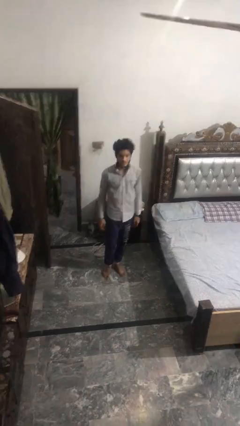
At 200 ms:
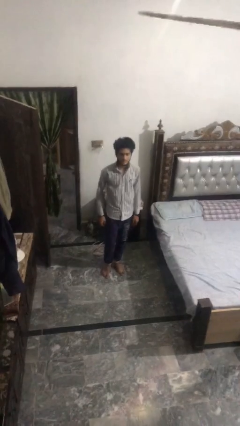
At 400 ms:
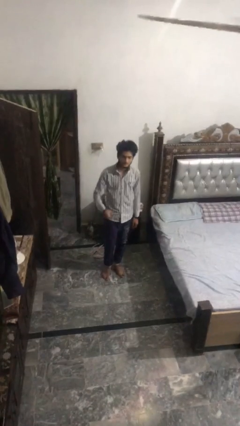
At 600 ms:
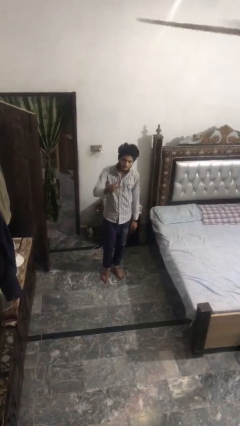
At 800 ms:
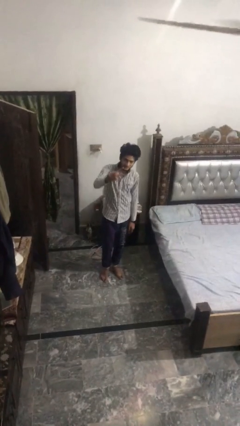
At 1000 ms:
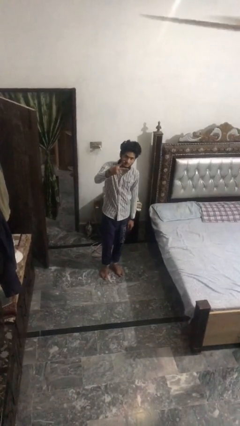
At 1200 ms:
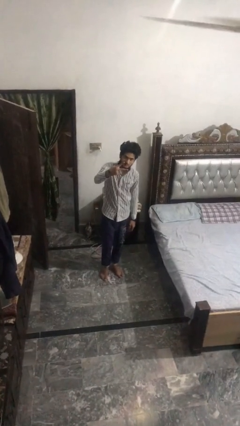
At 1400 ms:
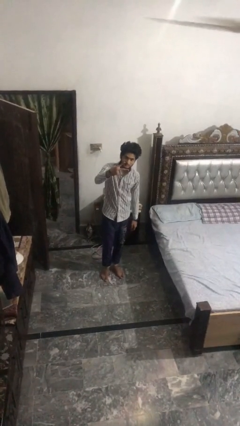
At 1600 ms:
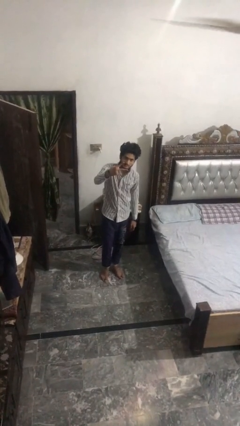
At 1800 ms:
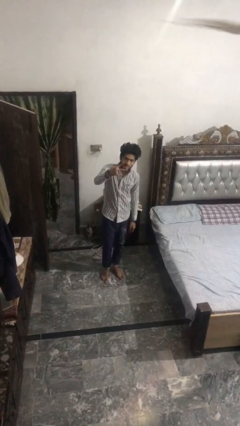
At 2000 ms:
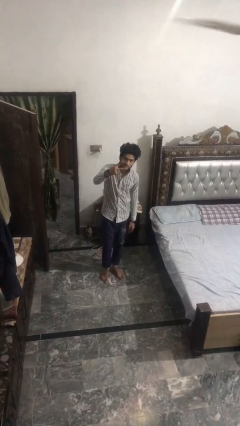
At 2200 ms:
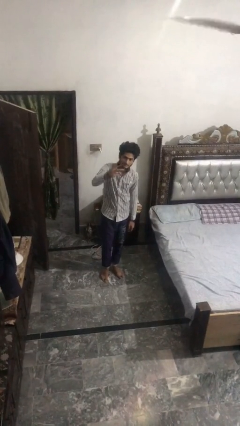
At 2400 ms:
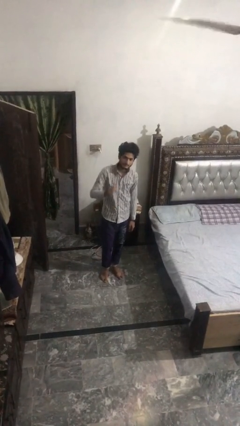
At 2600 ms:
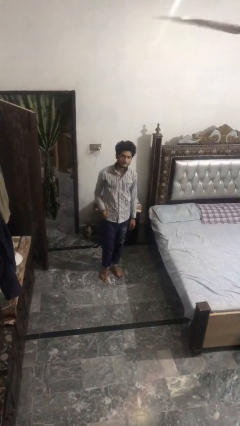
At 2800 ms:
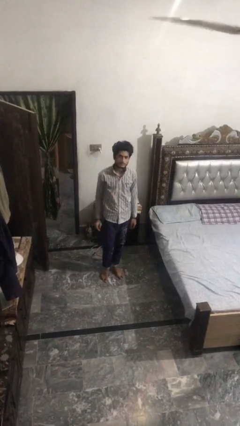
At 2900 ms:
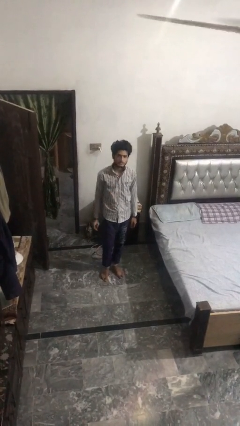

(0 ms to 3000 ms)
person gestures peace

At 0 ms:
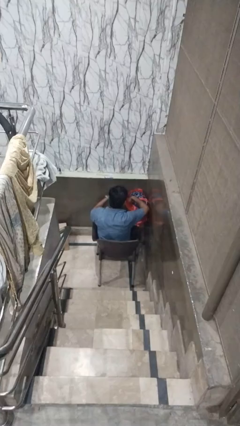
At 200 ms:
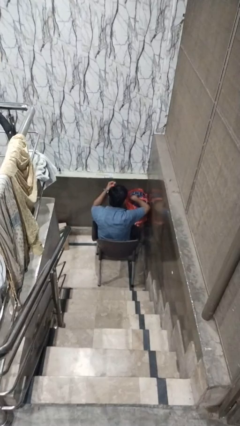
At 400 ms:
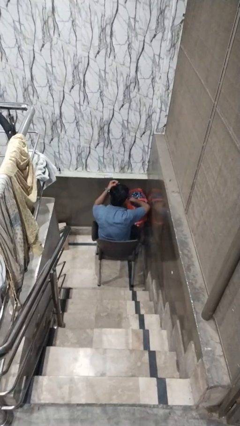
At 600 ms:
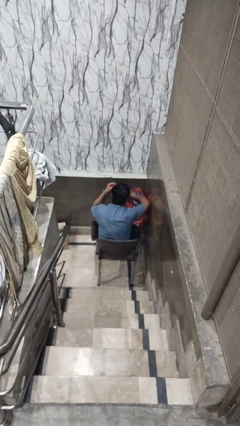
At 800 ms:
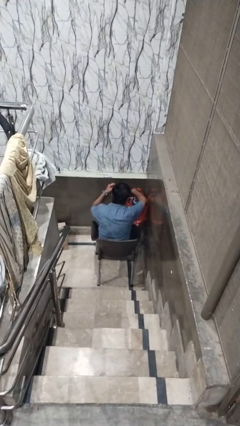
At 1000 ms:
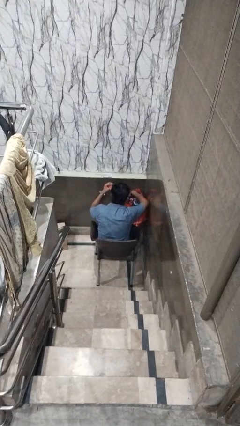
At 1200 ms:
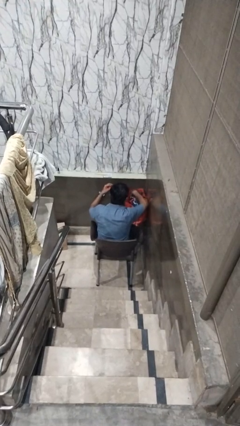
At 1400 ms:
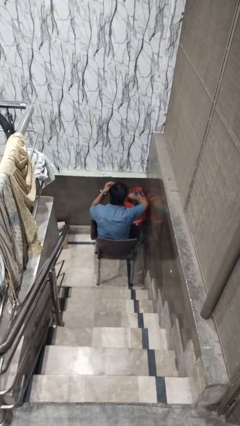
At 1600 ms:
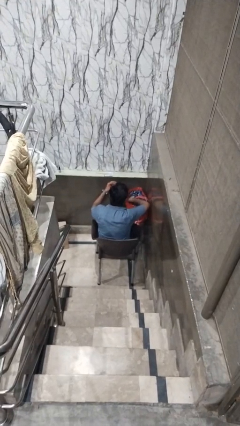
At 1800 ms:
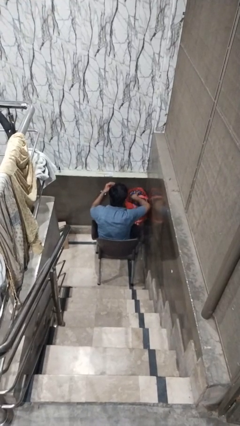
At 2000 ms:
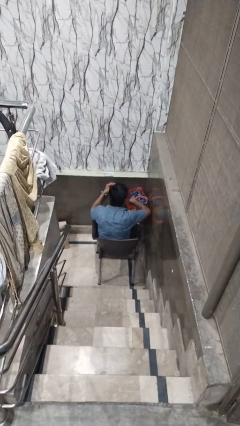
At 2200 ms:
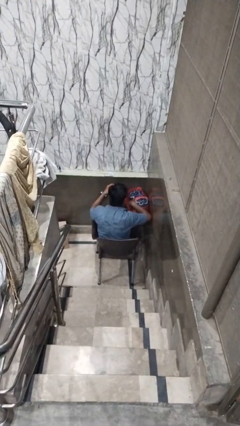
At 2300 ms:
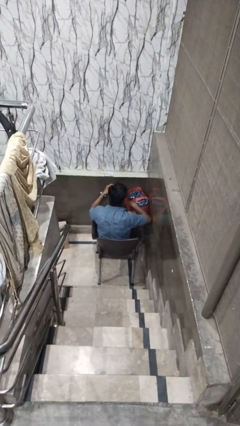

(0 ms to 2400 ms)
person searches in bag

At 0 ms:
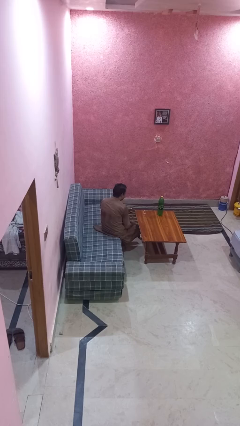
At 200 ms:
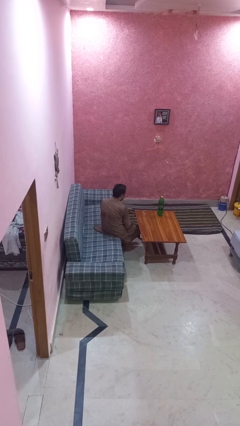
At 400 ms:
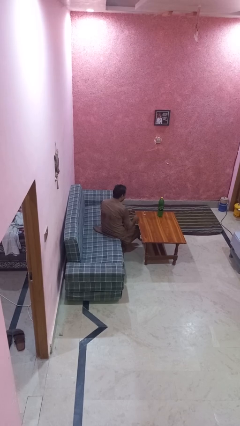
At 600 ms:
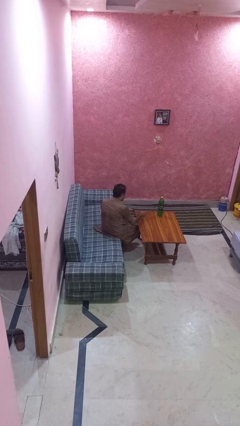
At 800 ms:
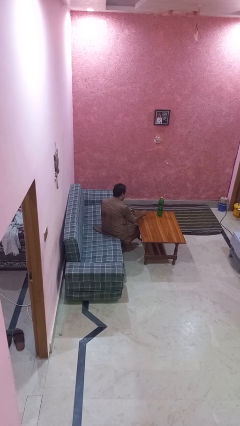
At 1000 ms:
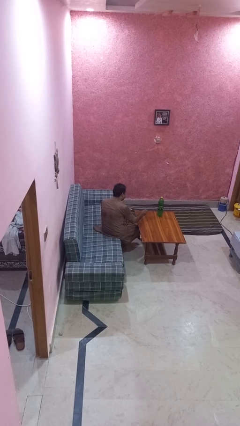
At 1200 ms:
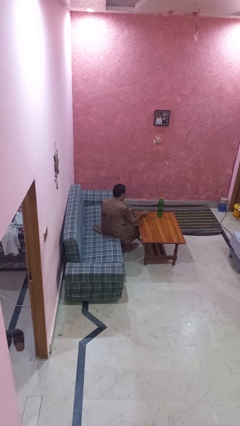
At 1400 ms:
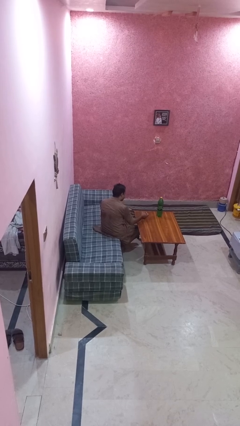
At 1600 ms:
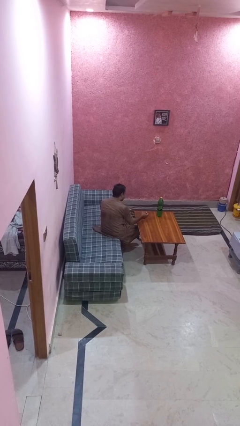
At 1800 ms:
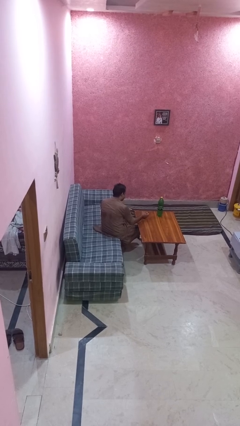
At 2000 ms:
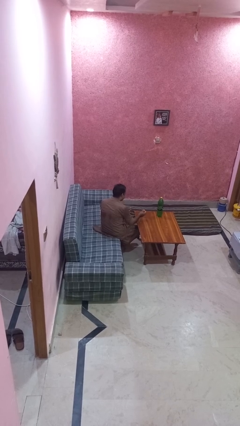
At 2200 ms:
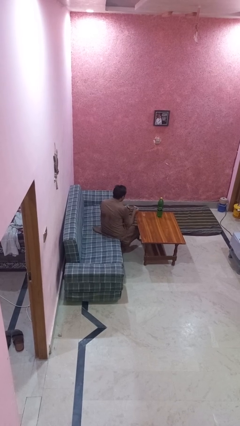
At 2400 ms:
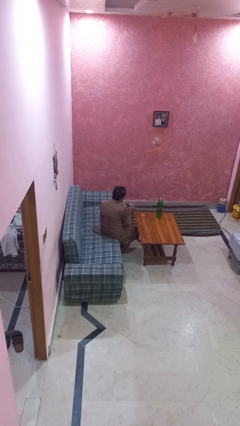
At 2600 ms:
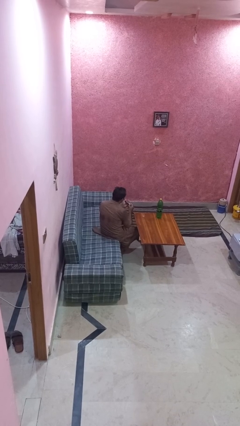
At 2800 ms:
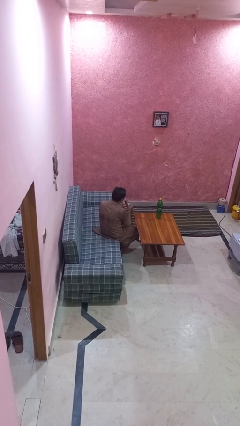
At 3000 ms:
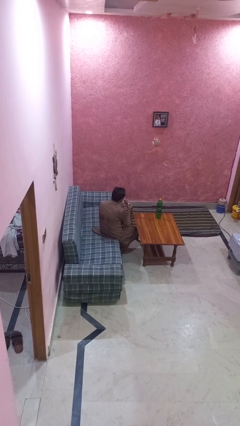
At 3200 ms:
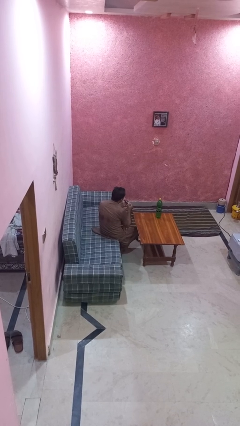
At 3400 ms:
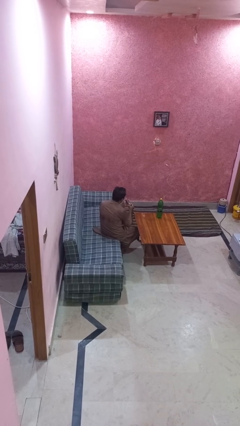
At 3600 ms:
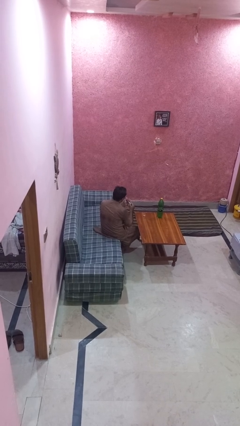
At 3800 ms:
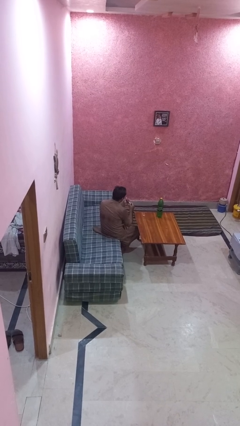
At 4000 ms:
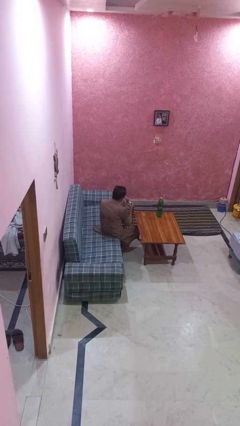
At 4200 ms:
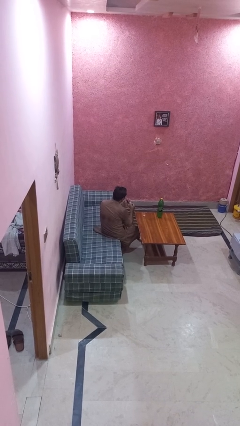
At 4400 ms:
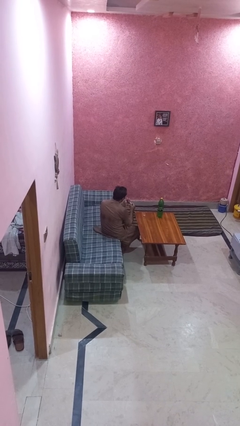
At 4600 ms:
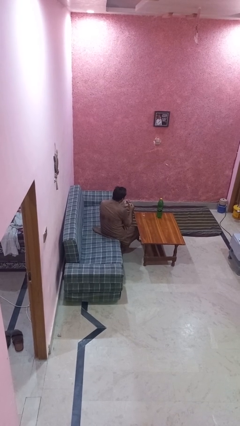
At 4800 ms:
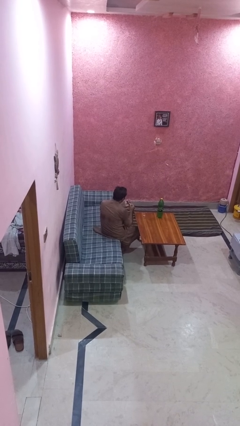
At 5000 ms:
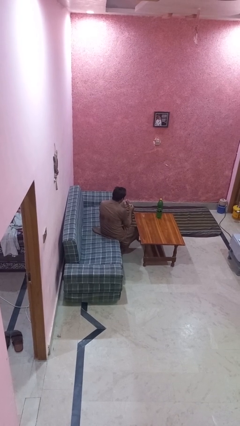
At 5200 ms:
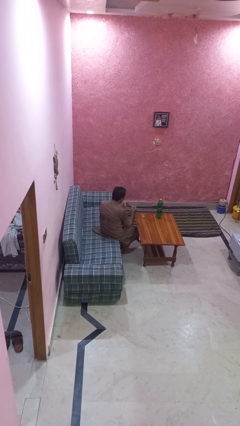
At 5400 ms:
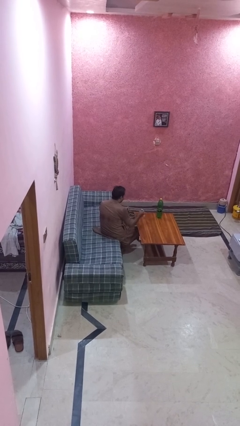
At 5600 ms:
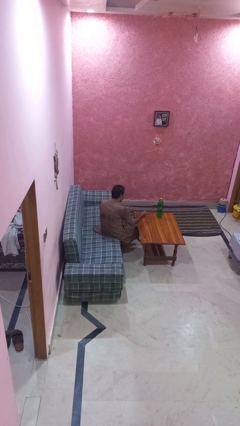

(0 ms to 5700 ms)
person paints fingernails

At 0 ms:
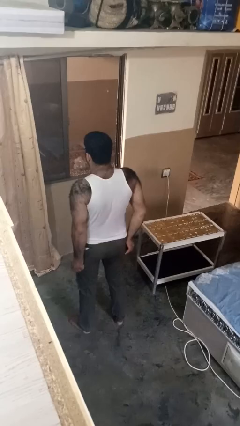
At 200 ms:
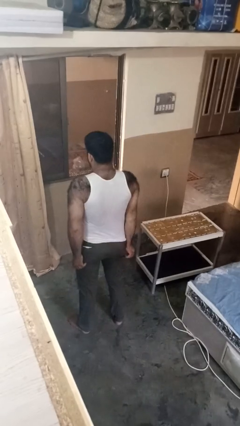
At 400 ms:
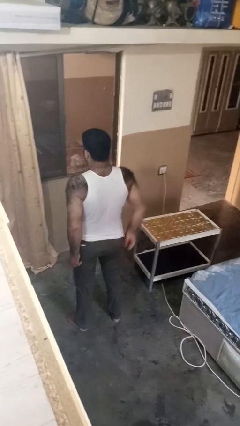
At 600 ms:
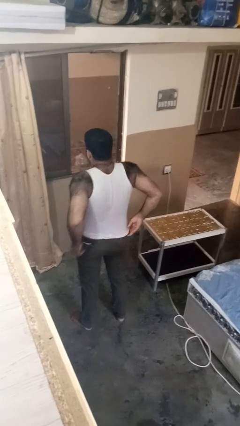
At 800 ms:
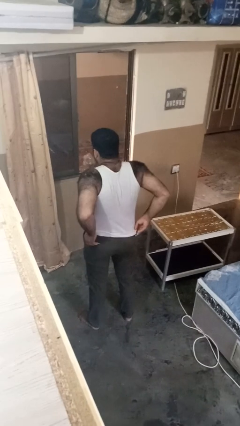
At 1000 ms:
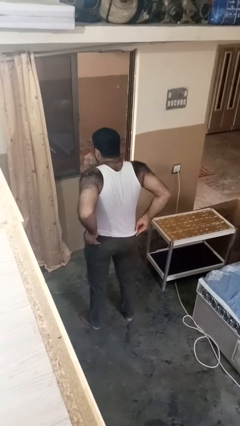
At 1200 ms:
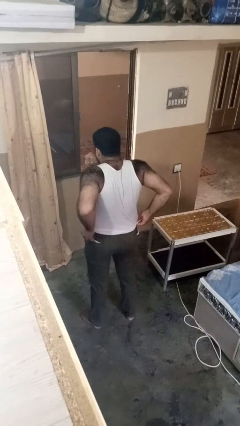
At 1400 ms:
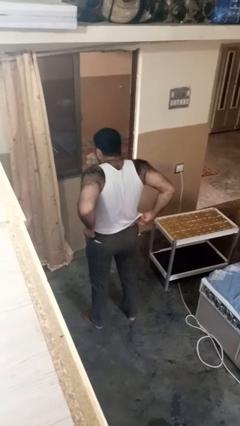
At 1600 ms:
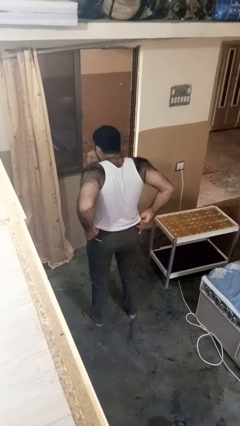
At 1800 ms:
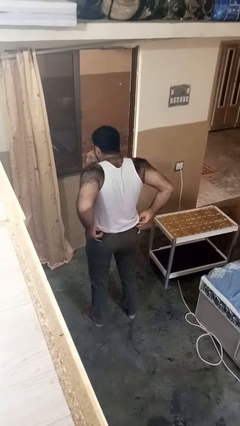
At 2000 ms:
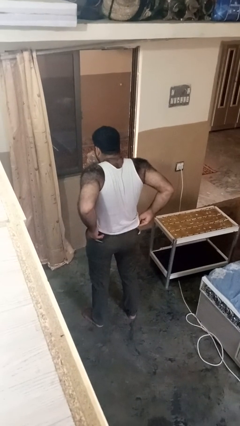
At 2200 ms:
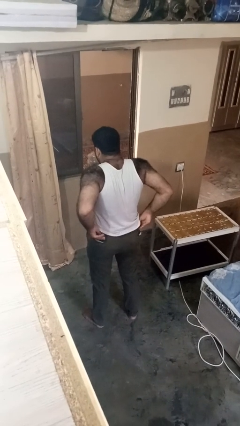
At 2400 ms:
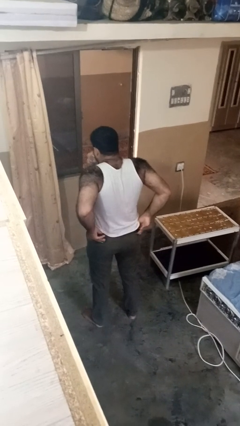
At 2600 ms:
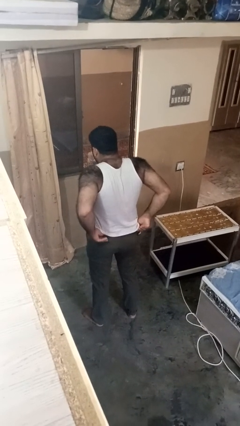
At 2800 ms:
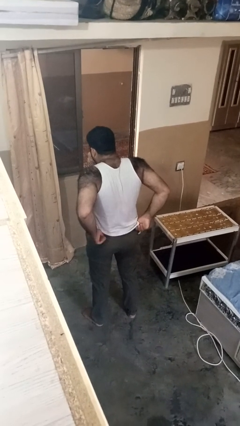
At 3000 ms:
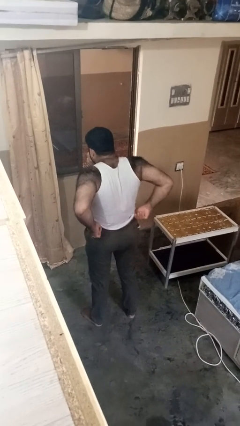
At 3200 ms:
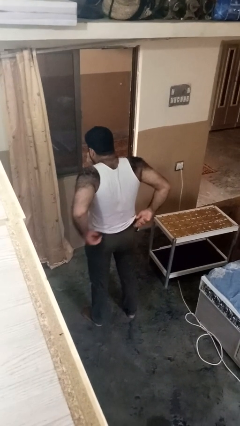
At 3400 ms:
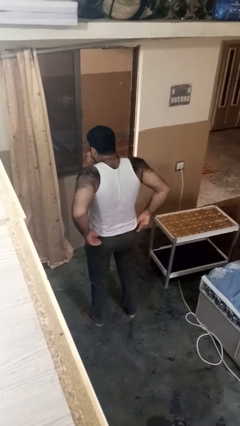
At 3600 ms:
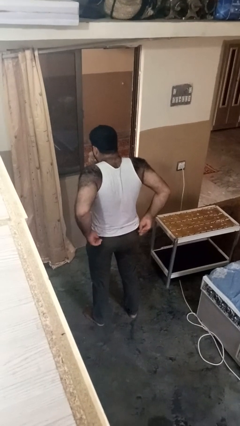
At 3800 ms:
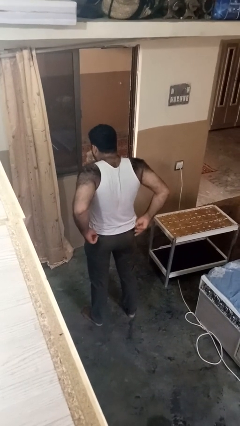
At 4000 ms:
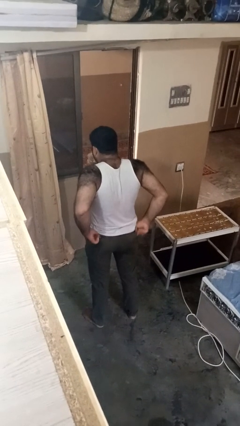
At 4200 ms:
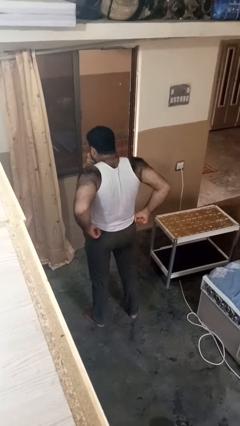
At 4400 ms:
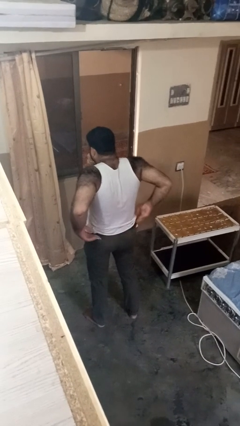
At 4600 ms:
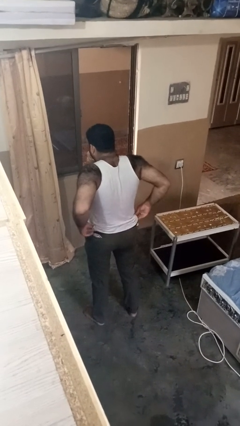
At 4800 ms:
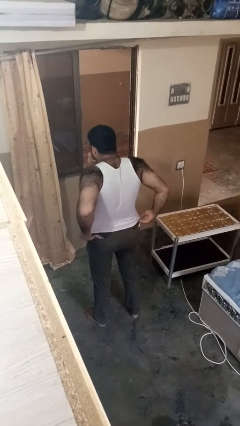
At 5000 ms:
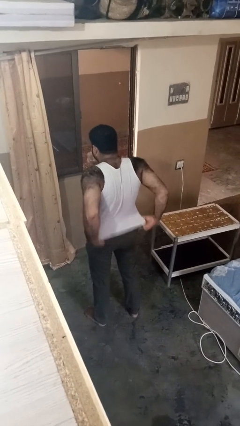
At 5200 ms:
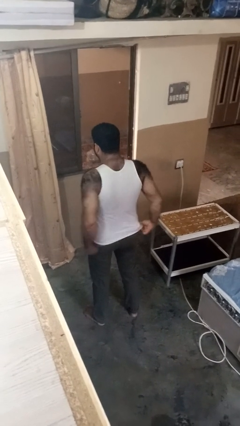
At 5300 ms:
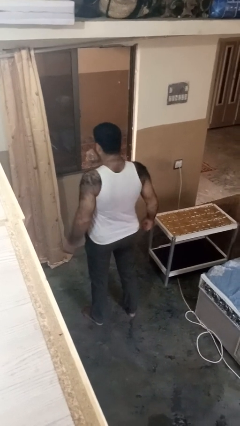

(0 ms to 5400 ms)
person hikes up pants

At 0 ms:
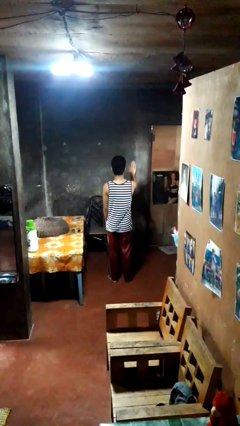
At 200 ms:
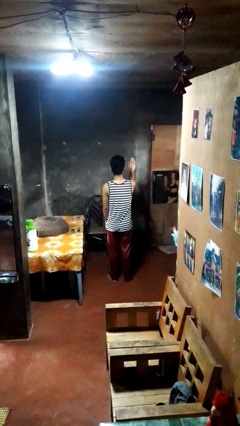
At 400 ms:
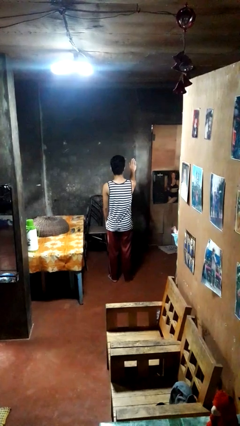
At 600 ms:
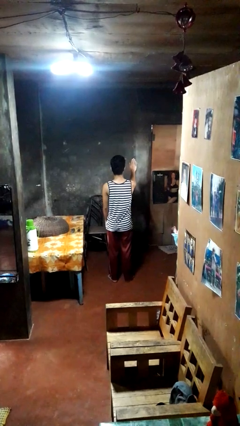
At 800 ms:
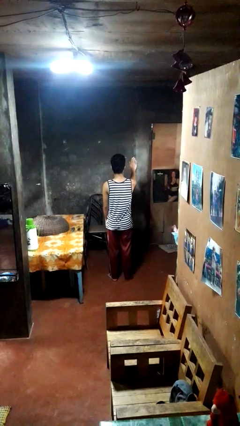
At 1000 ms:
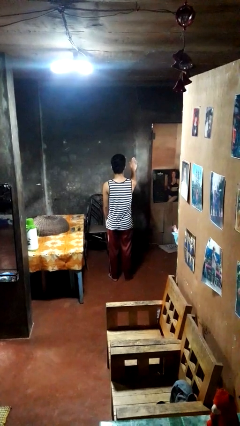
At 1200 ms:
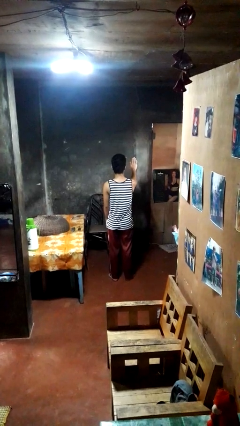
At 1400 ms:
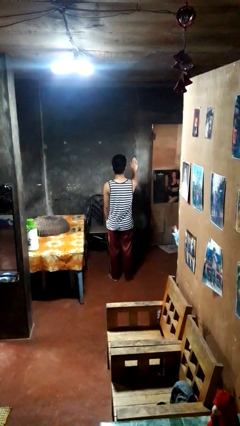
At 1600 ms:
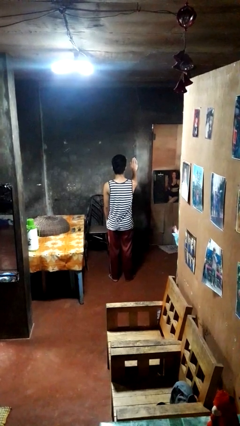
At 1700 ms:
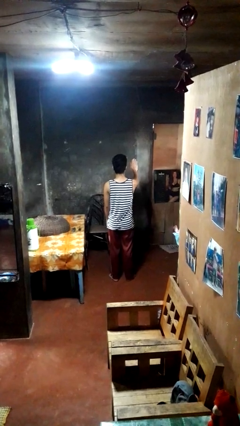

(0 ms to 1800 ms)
person gestures stop
